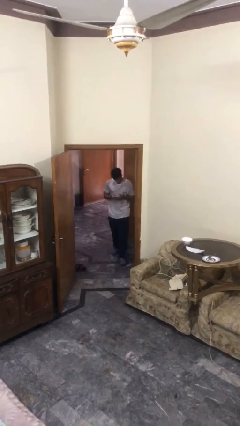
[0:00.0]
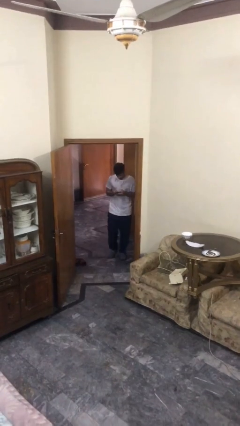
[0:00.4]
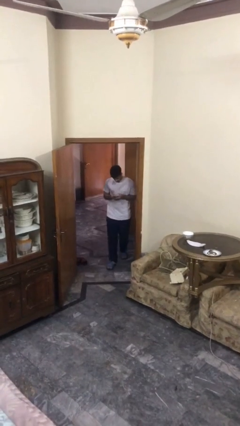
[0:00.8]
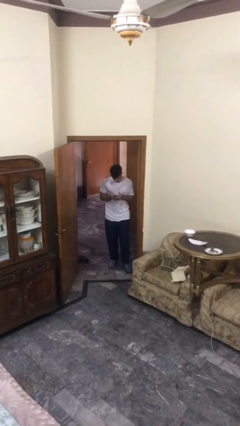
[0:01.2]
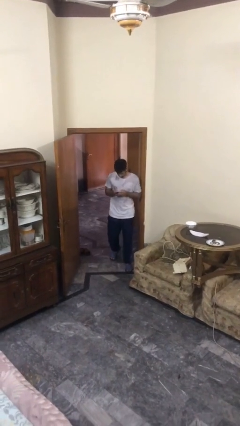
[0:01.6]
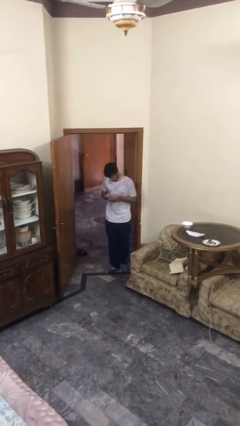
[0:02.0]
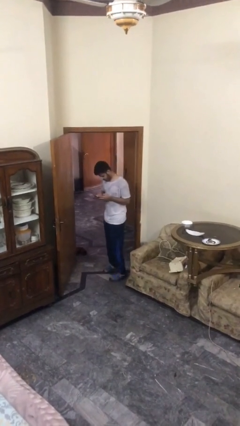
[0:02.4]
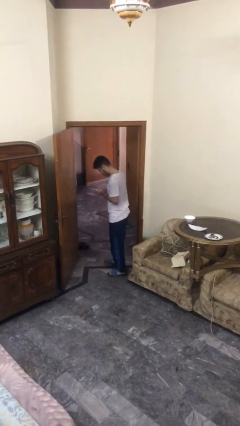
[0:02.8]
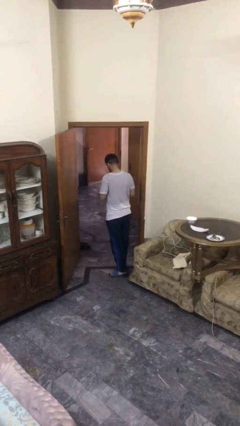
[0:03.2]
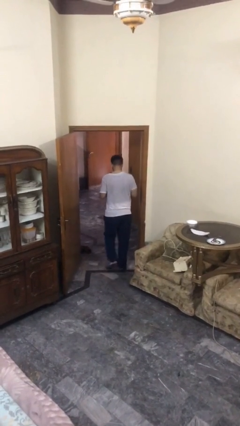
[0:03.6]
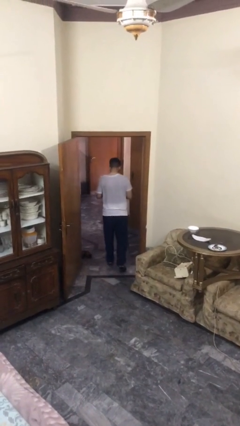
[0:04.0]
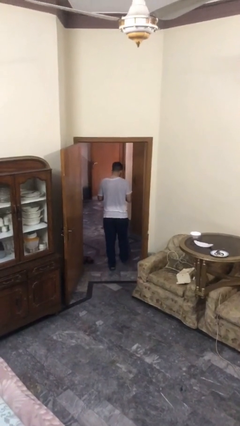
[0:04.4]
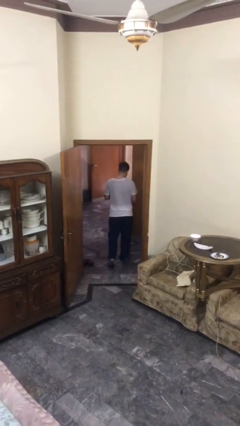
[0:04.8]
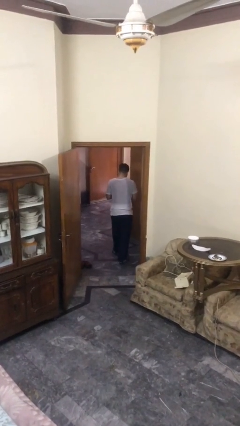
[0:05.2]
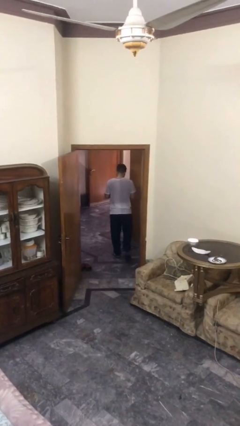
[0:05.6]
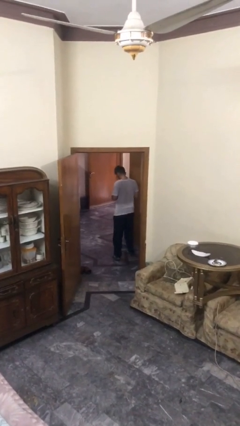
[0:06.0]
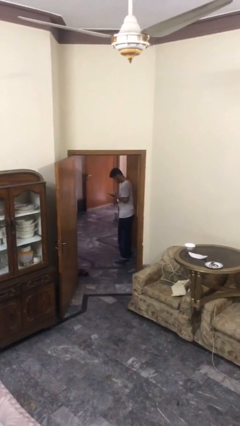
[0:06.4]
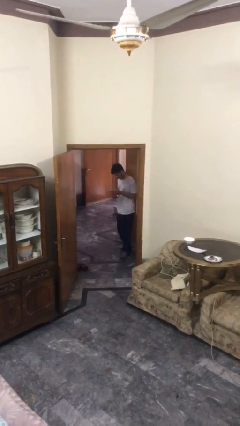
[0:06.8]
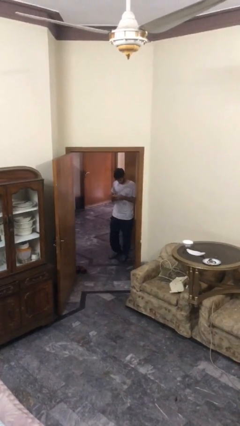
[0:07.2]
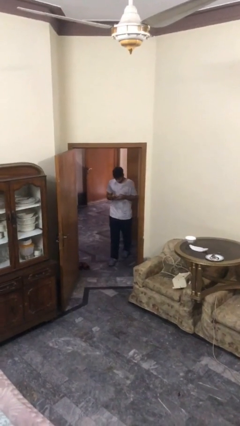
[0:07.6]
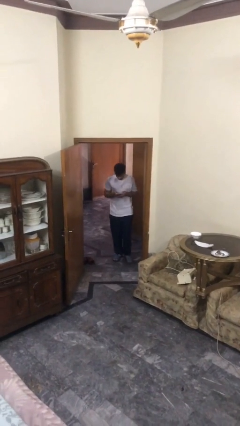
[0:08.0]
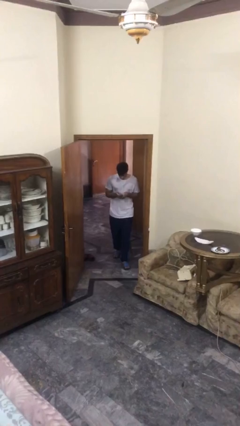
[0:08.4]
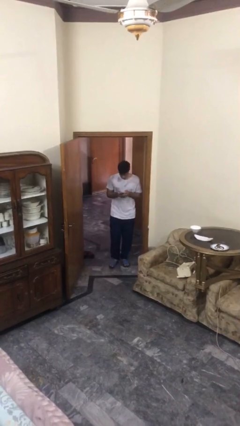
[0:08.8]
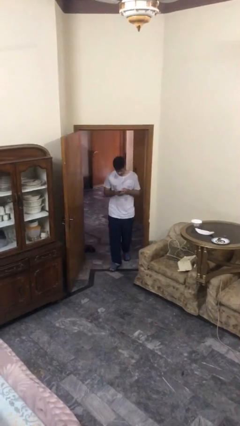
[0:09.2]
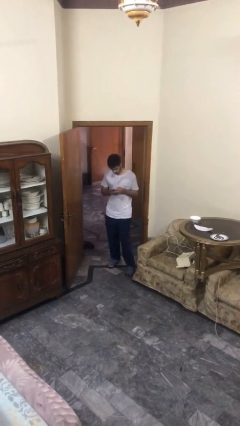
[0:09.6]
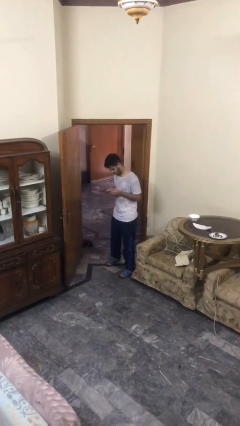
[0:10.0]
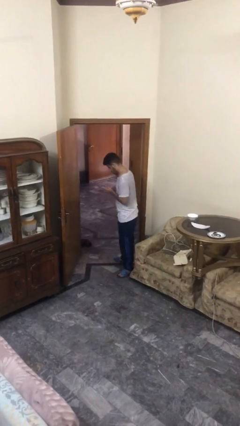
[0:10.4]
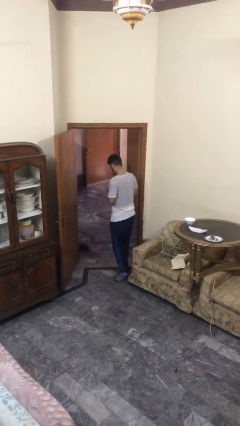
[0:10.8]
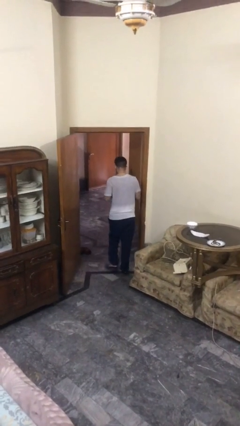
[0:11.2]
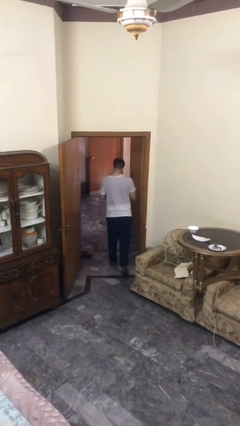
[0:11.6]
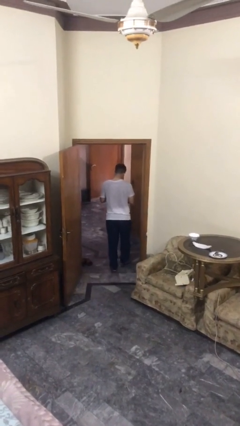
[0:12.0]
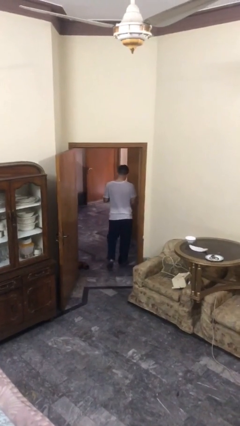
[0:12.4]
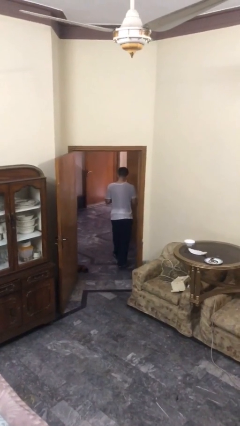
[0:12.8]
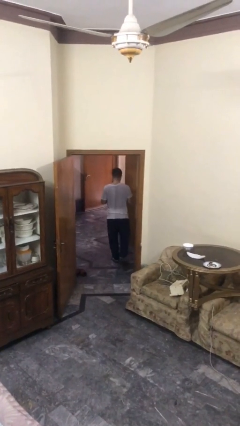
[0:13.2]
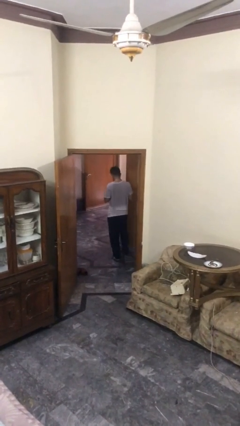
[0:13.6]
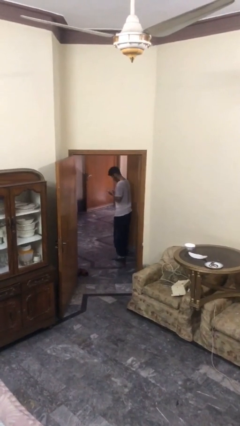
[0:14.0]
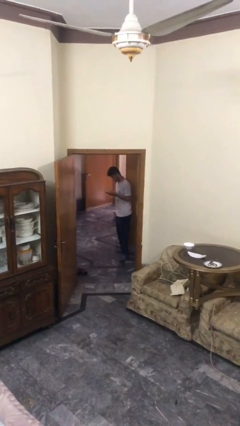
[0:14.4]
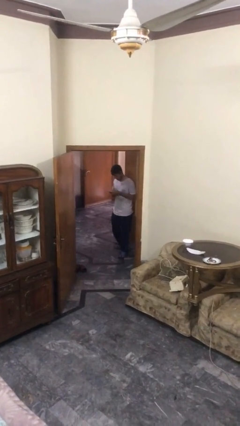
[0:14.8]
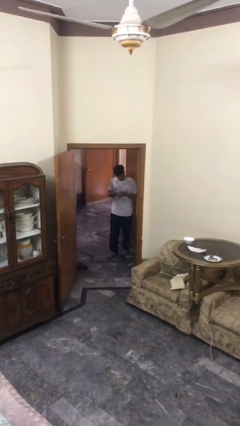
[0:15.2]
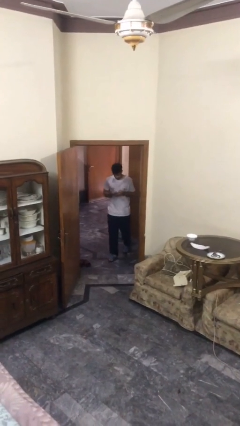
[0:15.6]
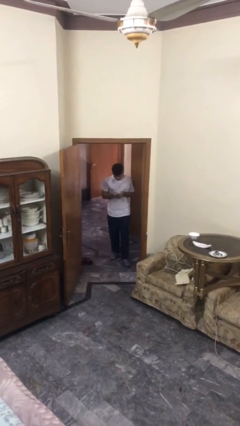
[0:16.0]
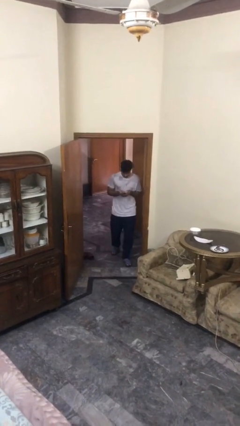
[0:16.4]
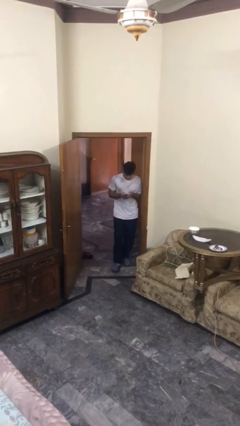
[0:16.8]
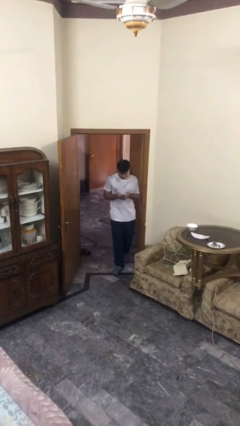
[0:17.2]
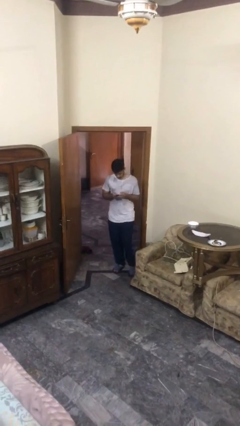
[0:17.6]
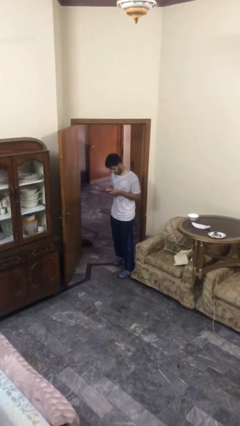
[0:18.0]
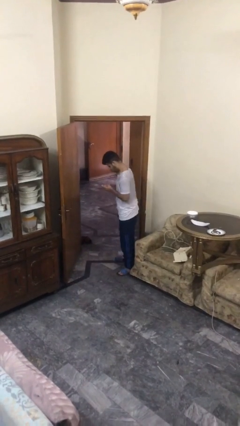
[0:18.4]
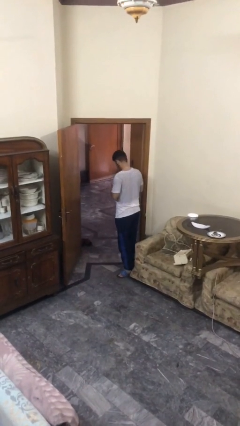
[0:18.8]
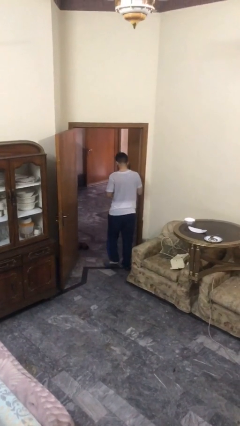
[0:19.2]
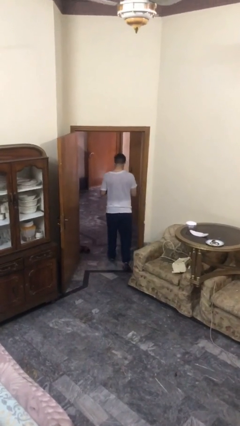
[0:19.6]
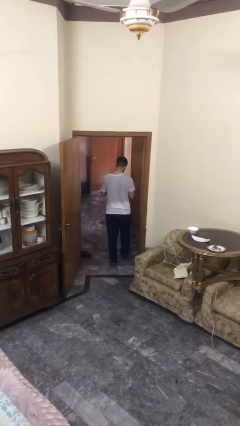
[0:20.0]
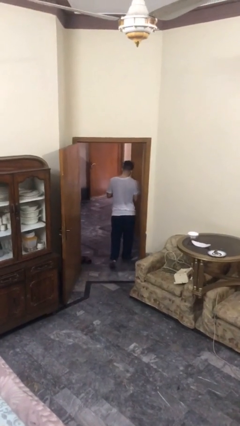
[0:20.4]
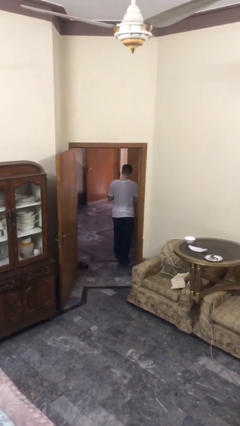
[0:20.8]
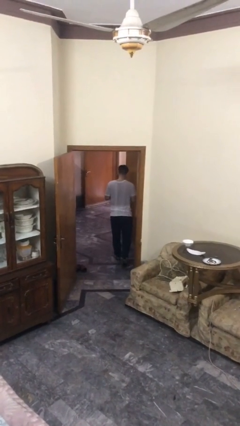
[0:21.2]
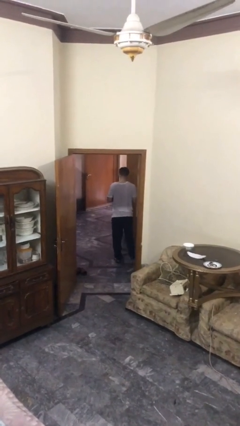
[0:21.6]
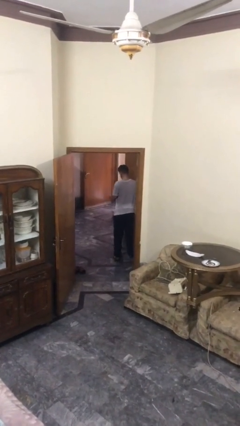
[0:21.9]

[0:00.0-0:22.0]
person texts on phone

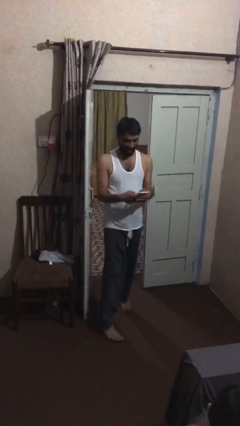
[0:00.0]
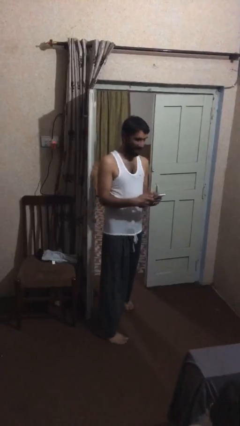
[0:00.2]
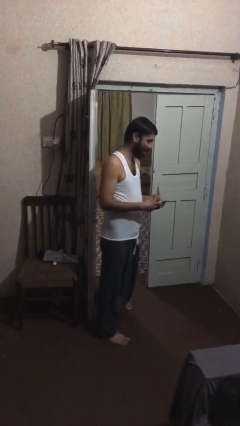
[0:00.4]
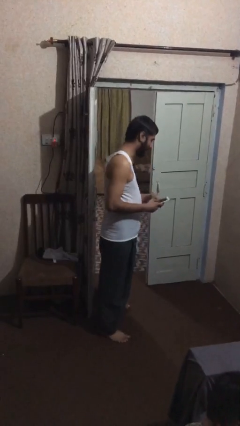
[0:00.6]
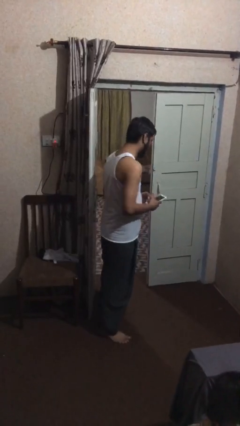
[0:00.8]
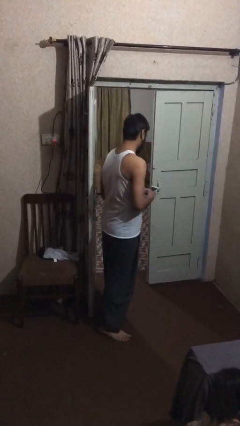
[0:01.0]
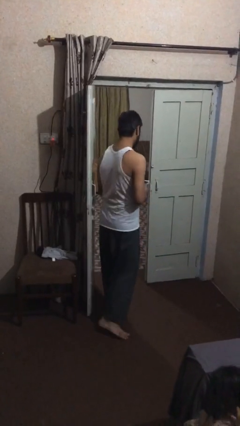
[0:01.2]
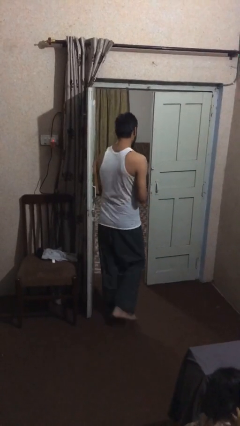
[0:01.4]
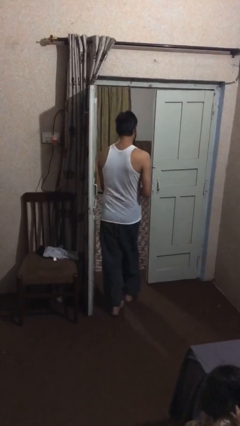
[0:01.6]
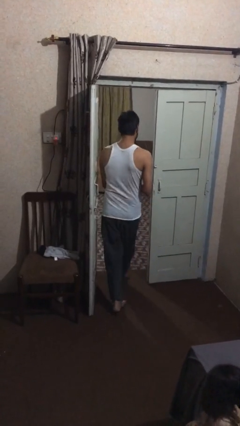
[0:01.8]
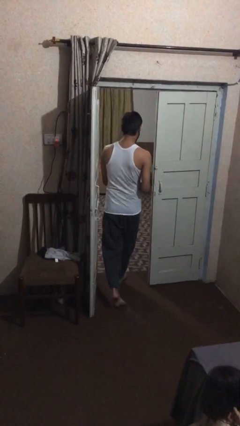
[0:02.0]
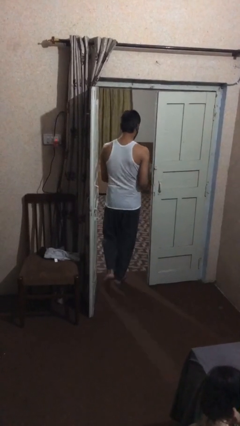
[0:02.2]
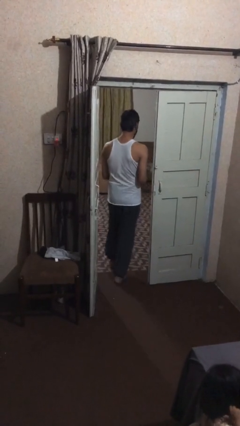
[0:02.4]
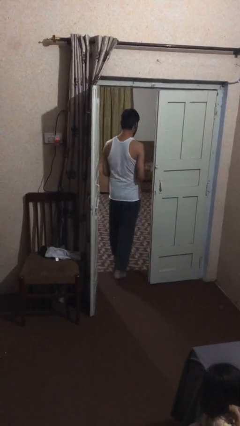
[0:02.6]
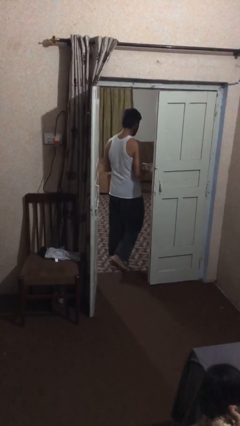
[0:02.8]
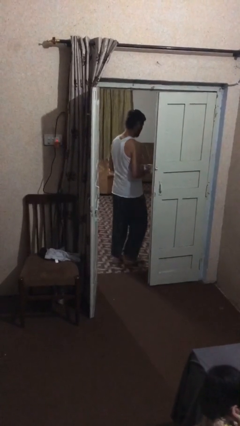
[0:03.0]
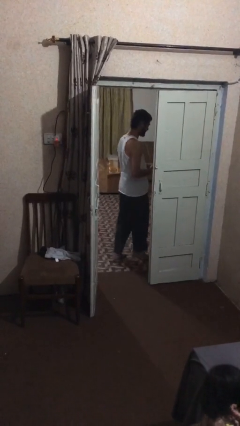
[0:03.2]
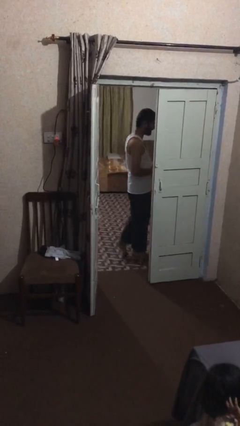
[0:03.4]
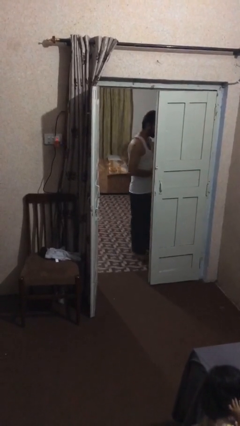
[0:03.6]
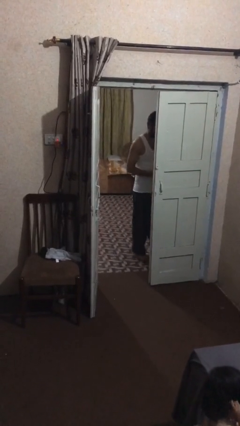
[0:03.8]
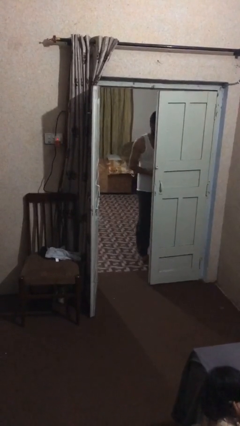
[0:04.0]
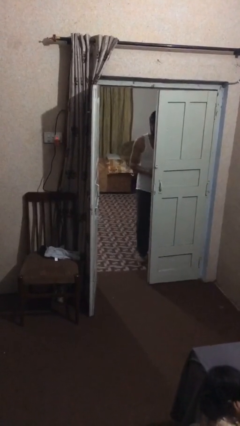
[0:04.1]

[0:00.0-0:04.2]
person exits scene through structure

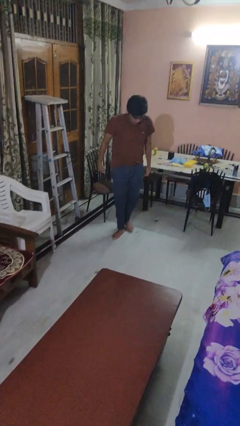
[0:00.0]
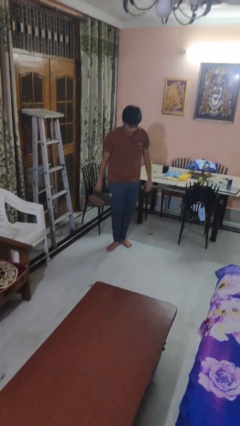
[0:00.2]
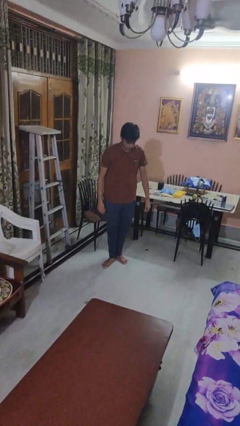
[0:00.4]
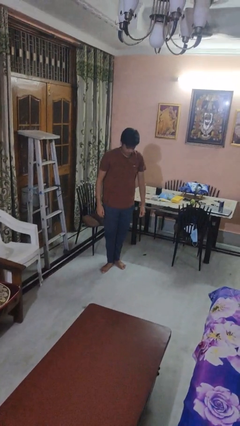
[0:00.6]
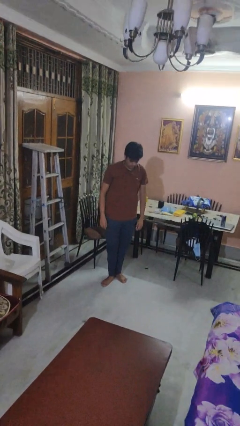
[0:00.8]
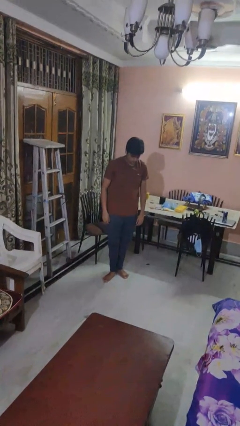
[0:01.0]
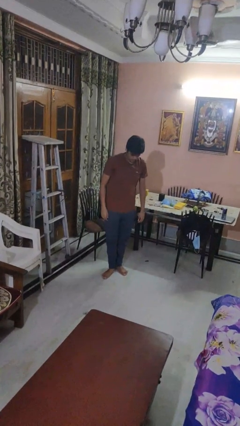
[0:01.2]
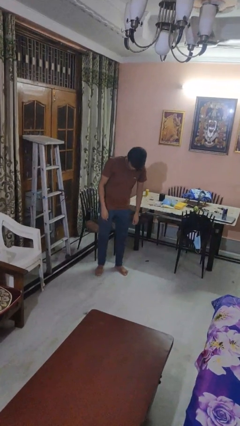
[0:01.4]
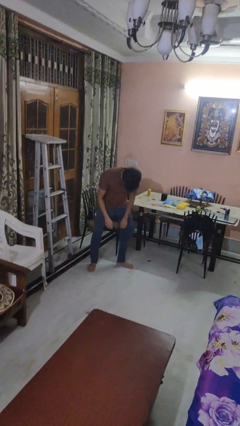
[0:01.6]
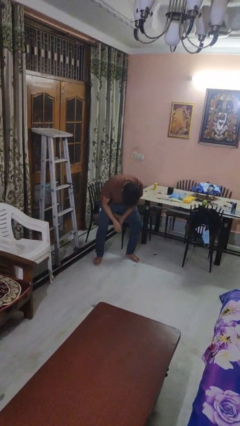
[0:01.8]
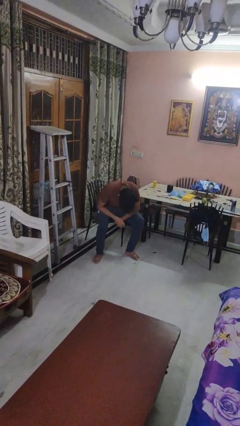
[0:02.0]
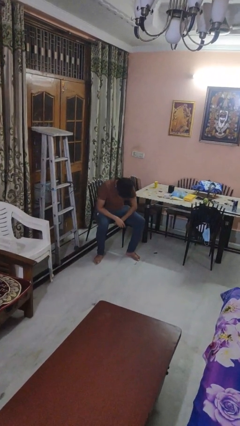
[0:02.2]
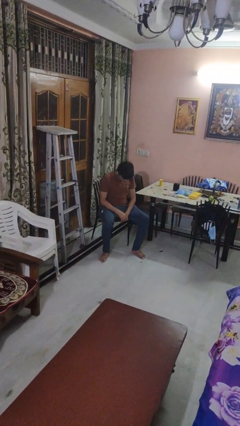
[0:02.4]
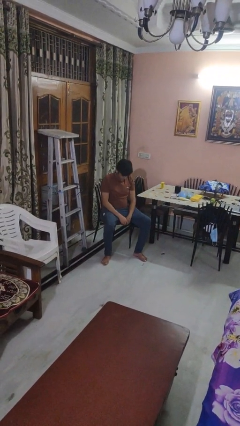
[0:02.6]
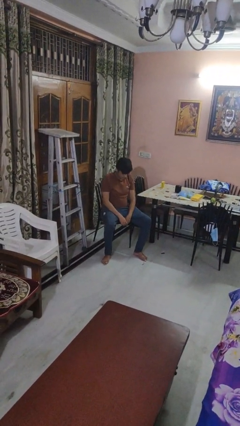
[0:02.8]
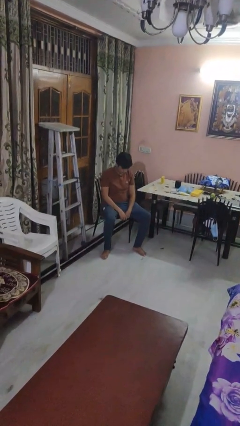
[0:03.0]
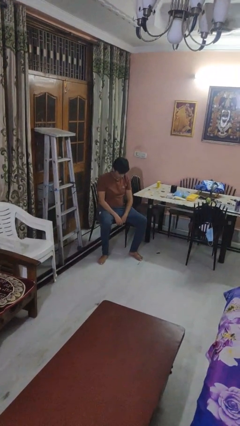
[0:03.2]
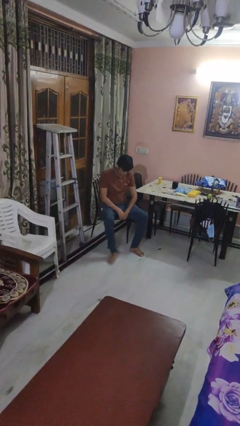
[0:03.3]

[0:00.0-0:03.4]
person stands up from floor
